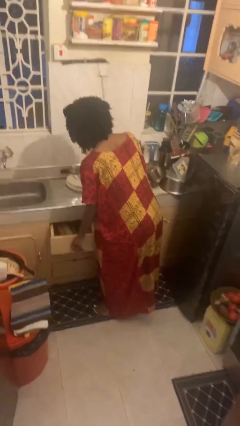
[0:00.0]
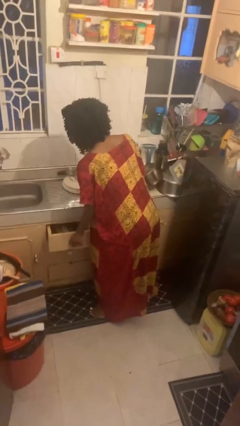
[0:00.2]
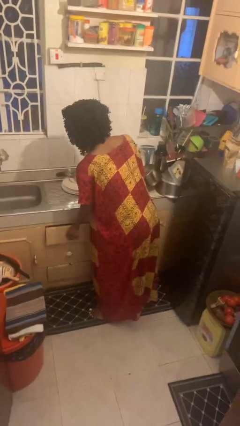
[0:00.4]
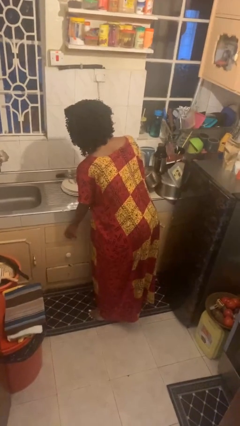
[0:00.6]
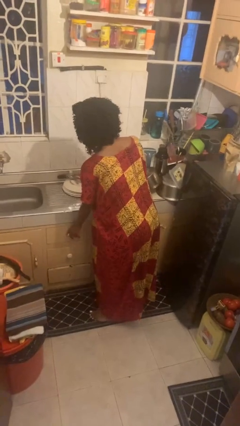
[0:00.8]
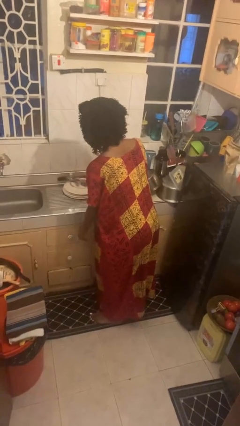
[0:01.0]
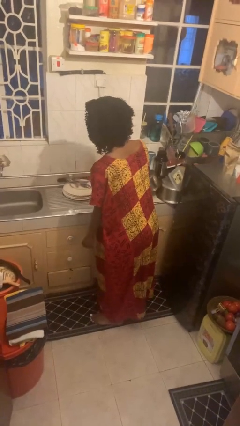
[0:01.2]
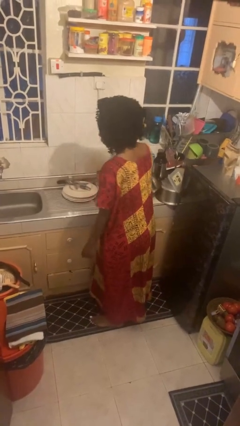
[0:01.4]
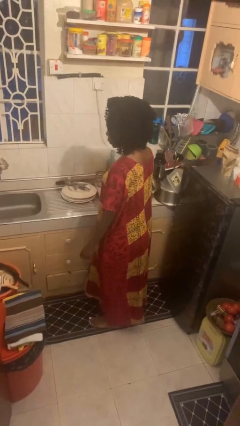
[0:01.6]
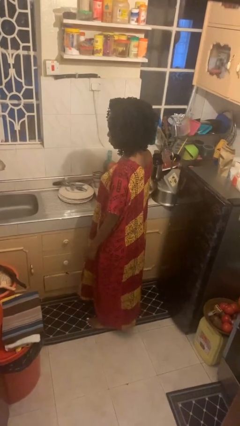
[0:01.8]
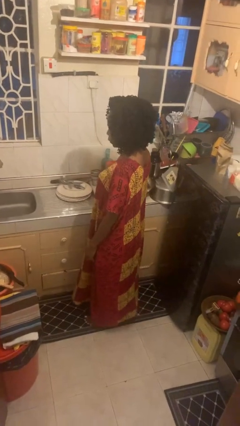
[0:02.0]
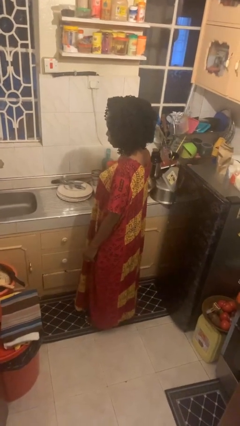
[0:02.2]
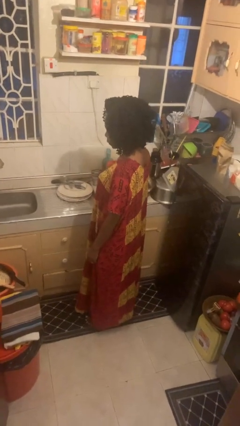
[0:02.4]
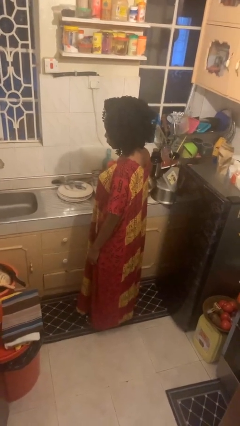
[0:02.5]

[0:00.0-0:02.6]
person closes kitchen drawer

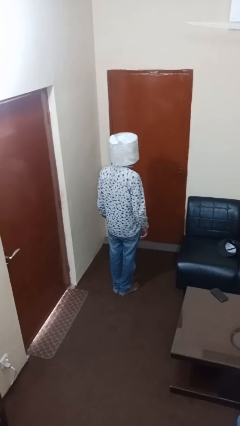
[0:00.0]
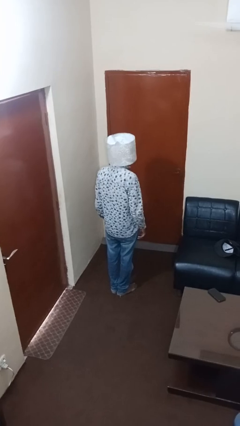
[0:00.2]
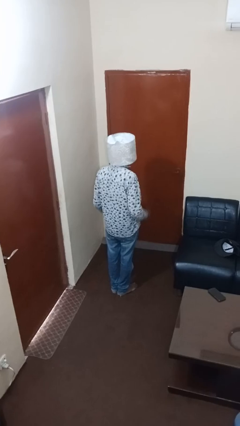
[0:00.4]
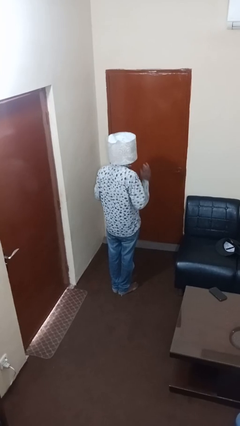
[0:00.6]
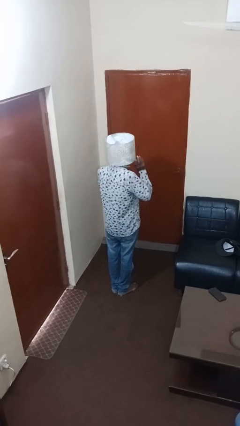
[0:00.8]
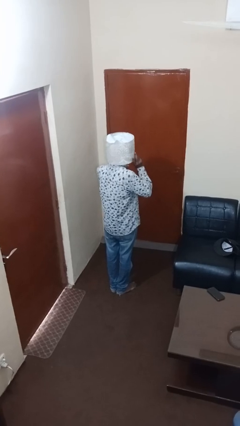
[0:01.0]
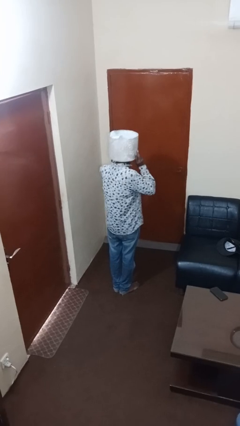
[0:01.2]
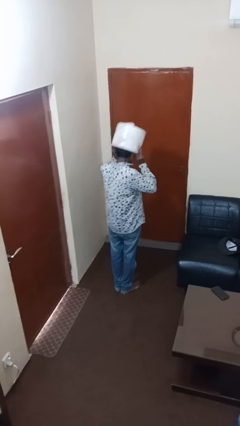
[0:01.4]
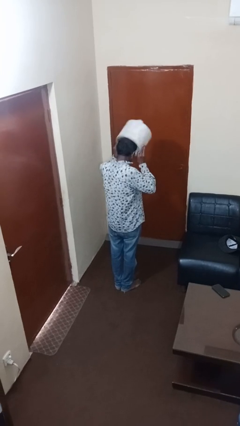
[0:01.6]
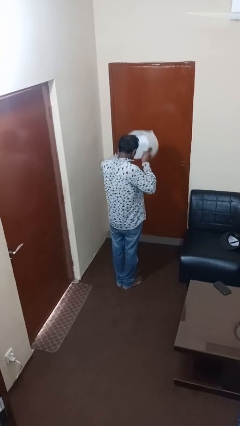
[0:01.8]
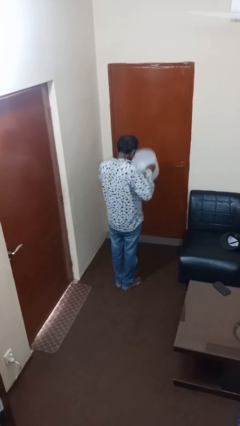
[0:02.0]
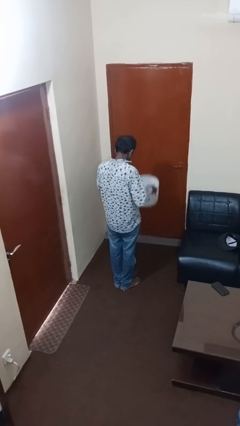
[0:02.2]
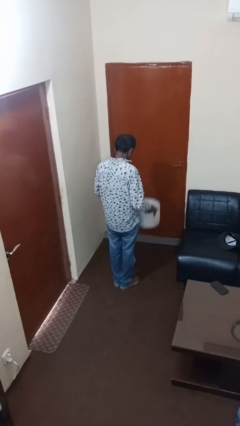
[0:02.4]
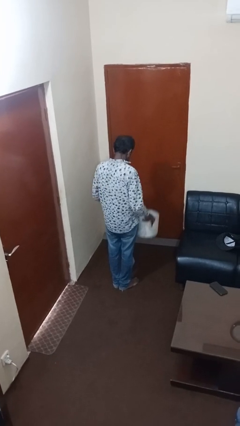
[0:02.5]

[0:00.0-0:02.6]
person takes off hat

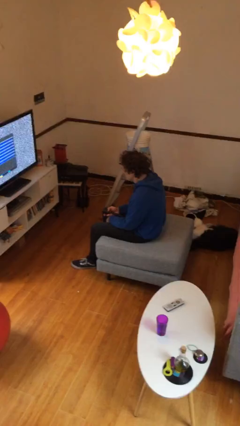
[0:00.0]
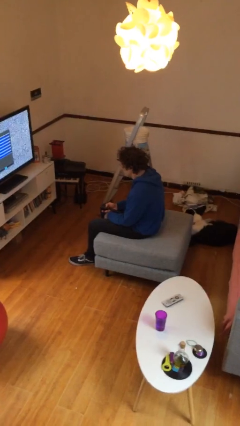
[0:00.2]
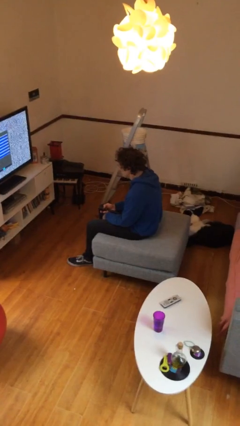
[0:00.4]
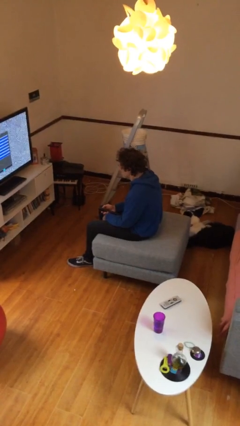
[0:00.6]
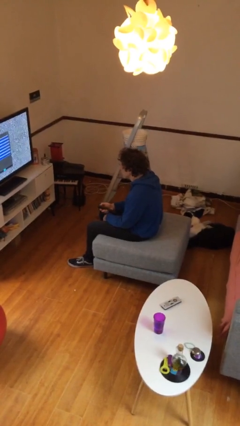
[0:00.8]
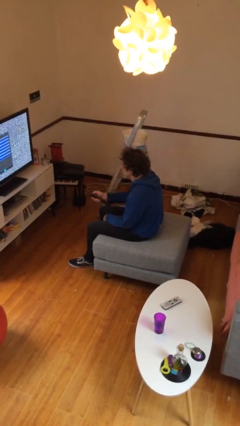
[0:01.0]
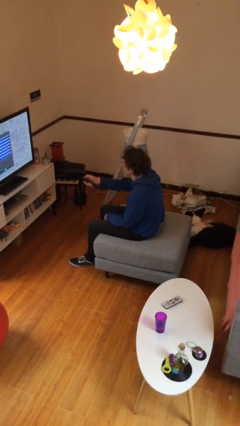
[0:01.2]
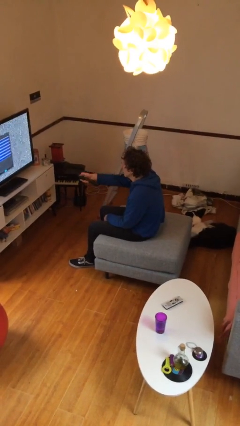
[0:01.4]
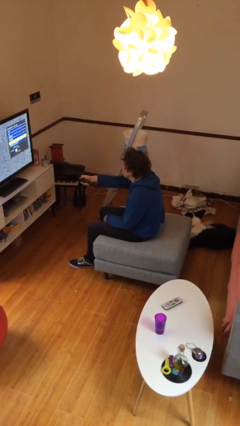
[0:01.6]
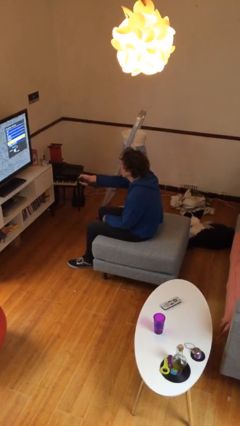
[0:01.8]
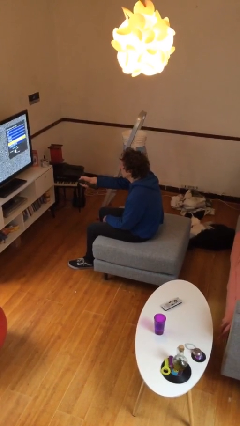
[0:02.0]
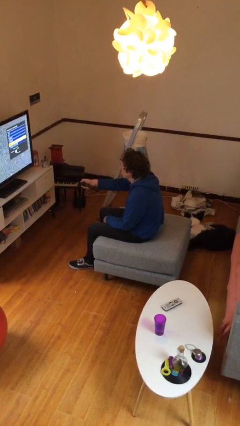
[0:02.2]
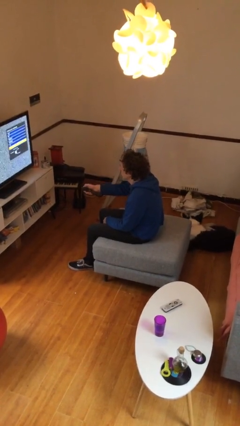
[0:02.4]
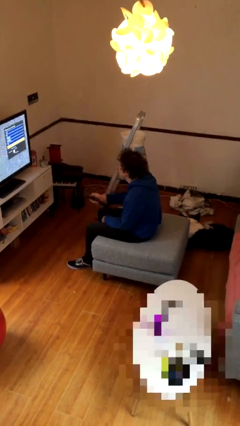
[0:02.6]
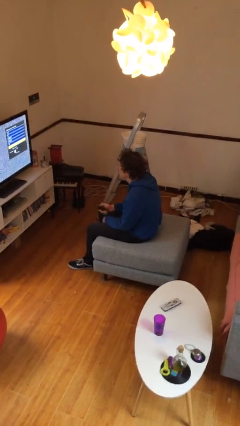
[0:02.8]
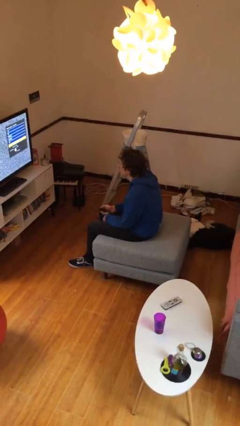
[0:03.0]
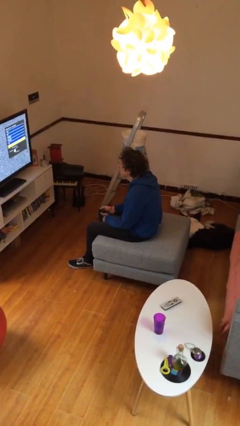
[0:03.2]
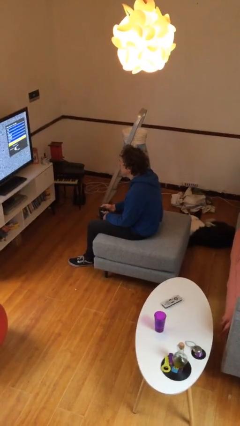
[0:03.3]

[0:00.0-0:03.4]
person uses television remote

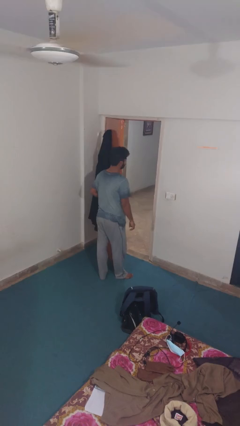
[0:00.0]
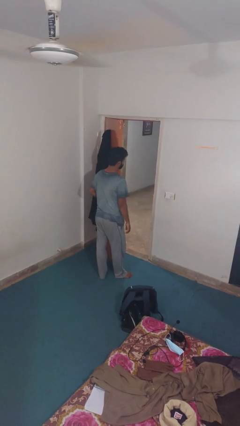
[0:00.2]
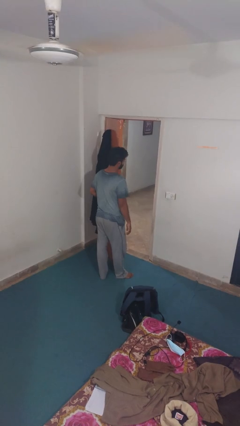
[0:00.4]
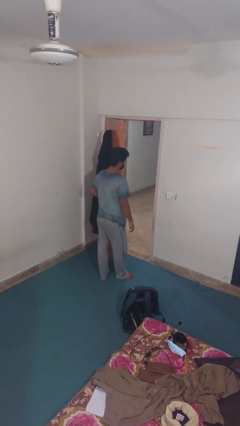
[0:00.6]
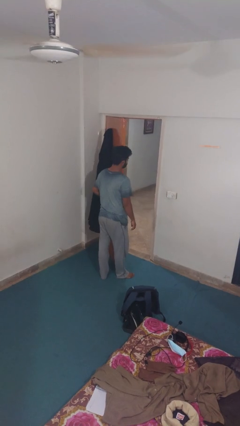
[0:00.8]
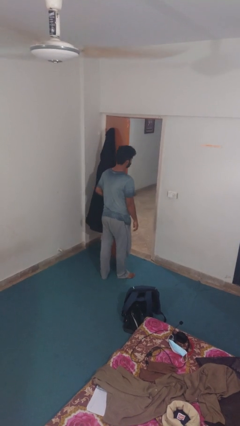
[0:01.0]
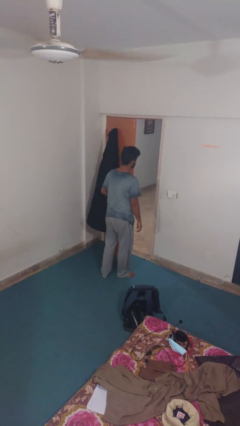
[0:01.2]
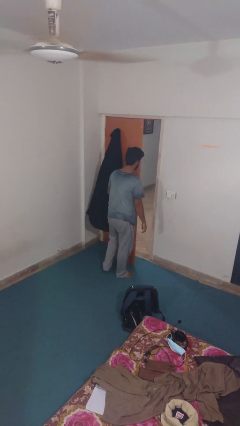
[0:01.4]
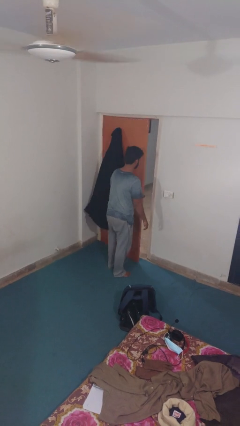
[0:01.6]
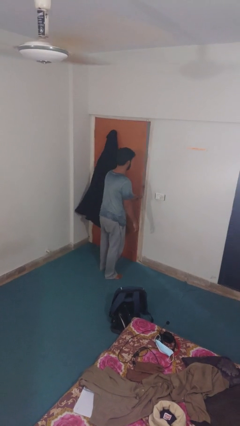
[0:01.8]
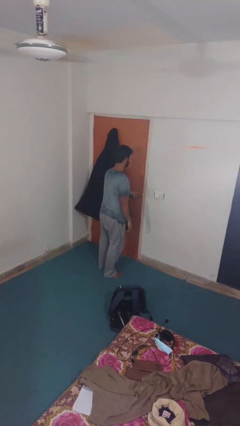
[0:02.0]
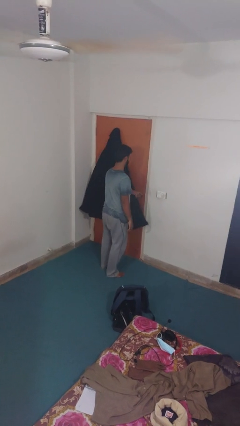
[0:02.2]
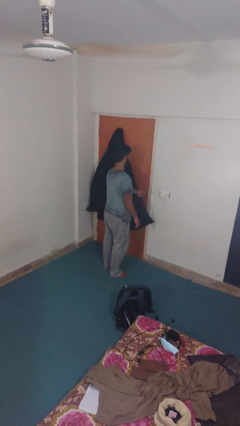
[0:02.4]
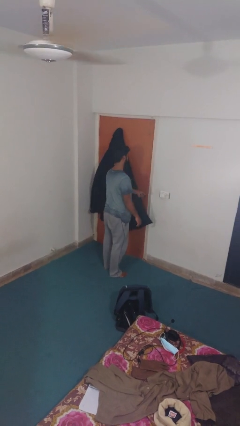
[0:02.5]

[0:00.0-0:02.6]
person closes facility door

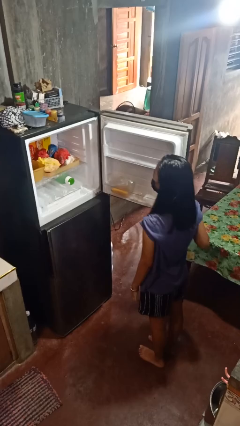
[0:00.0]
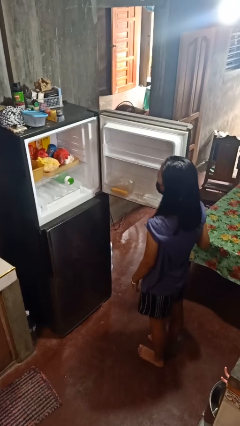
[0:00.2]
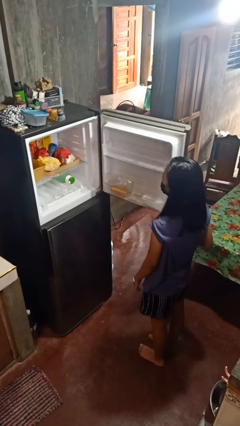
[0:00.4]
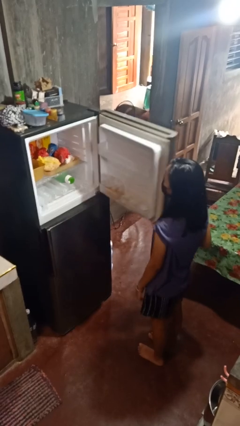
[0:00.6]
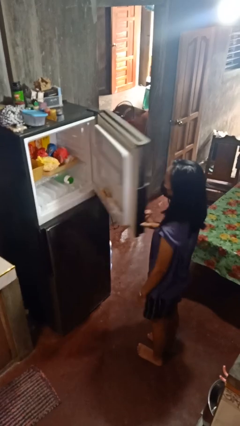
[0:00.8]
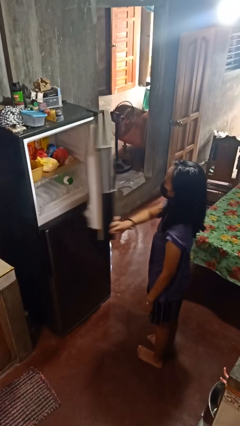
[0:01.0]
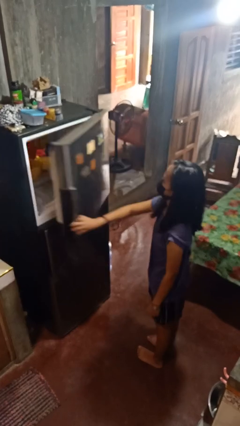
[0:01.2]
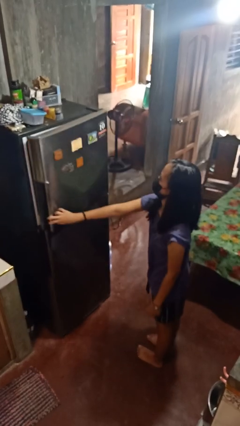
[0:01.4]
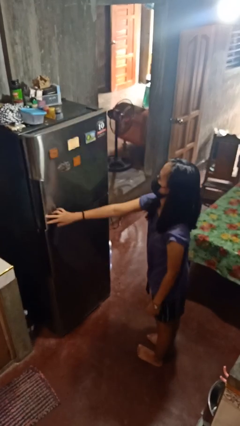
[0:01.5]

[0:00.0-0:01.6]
person closes refrigerator

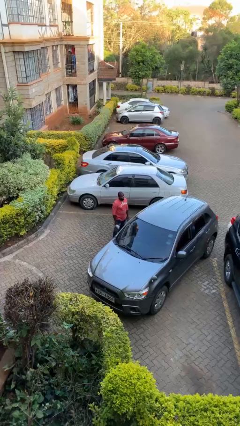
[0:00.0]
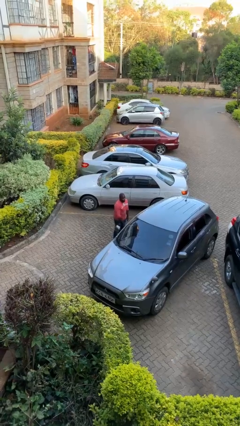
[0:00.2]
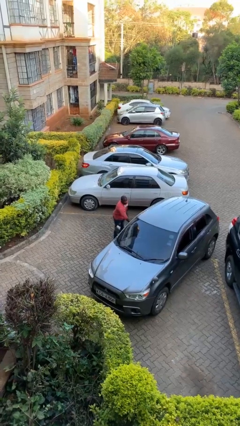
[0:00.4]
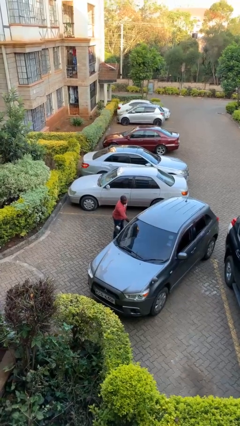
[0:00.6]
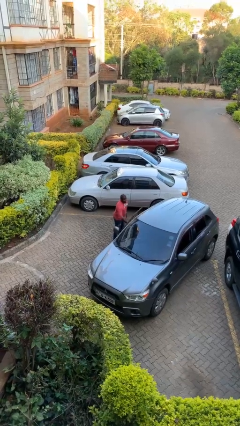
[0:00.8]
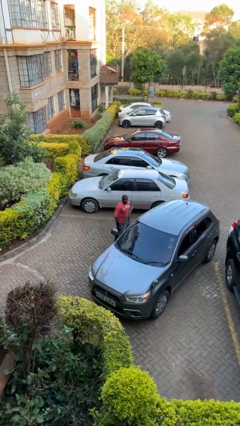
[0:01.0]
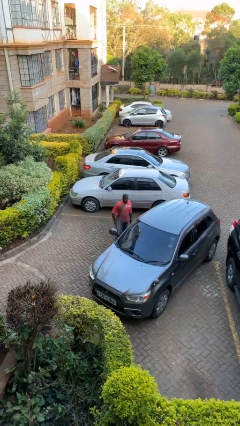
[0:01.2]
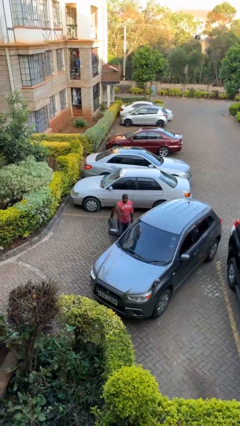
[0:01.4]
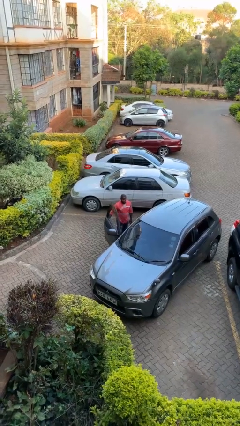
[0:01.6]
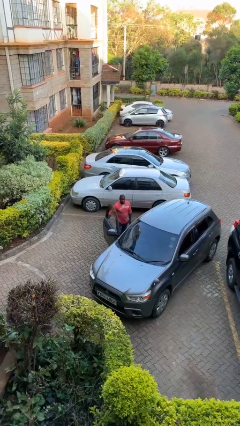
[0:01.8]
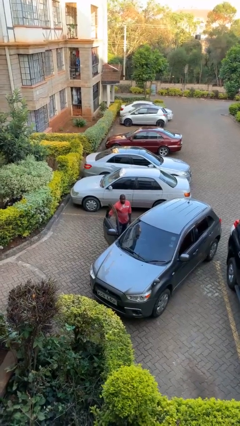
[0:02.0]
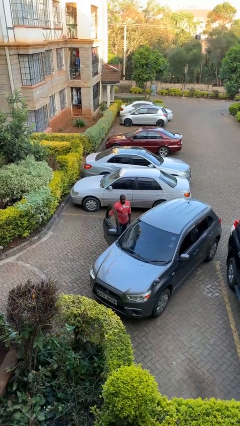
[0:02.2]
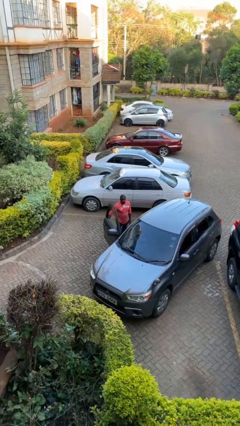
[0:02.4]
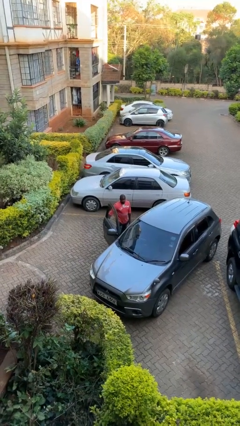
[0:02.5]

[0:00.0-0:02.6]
person opens car door

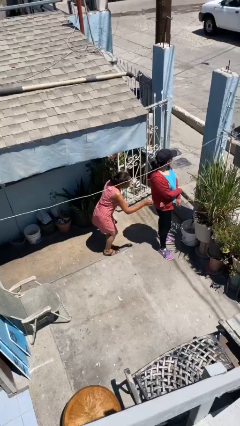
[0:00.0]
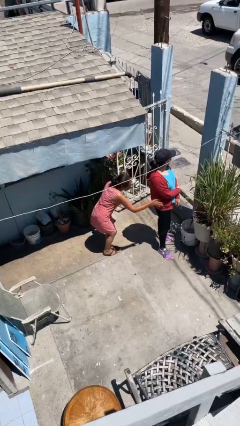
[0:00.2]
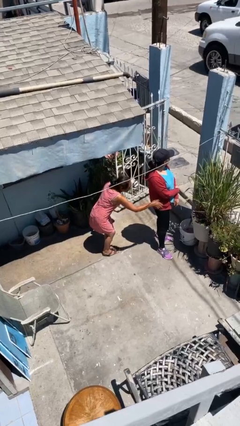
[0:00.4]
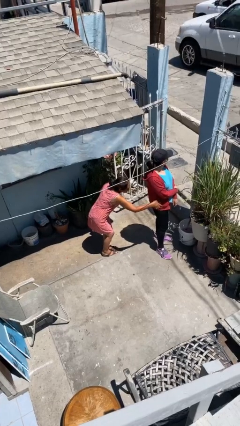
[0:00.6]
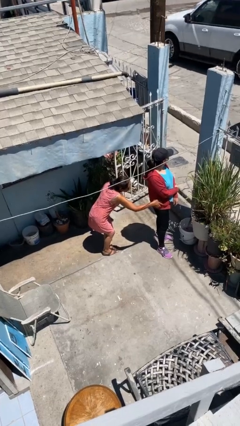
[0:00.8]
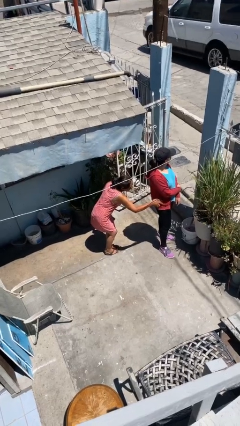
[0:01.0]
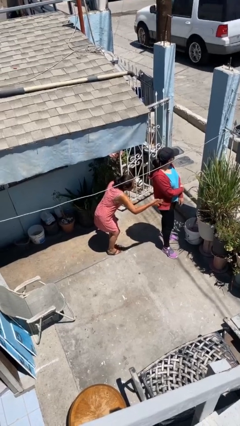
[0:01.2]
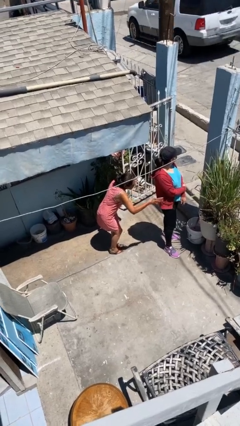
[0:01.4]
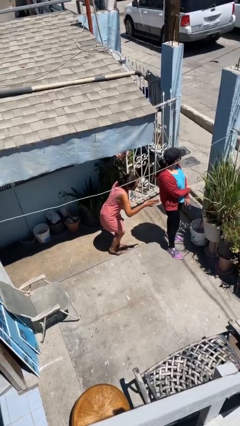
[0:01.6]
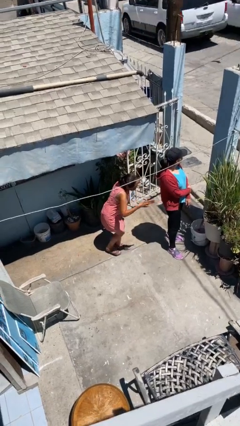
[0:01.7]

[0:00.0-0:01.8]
person steals object from person
